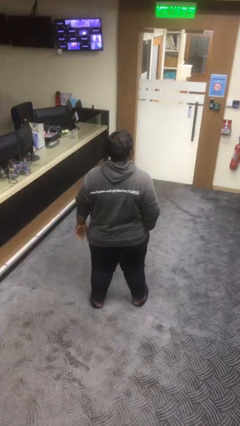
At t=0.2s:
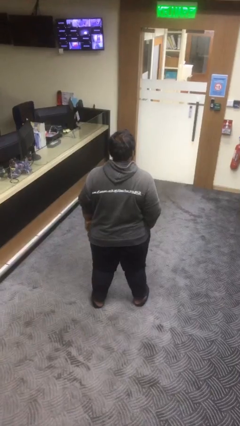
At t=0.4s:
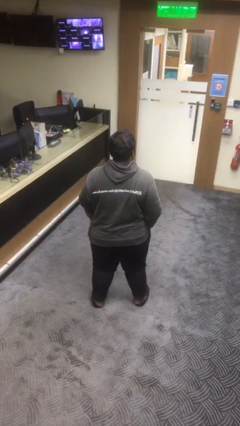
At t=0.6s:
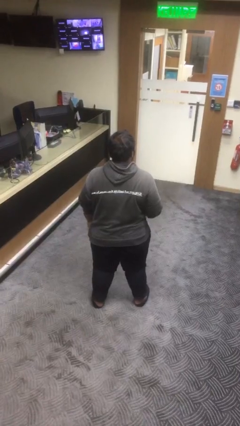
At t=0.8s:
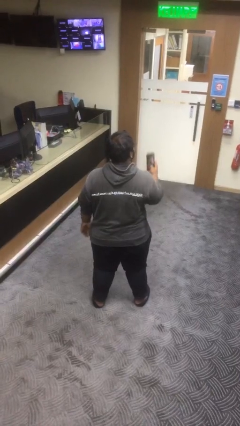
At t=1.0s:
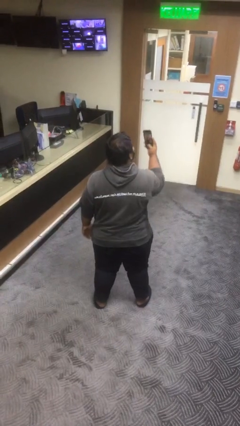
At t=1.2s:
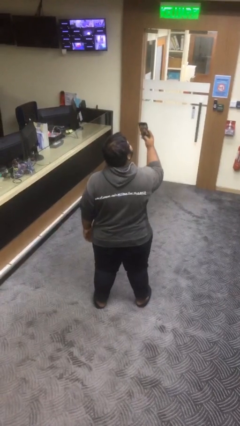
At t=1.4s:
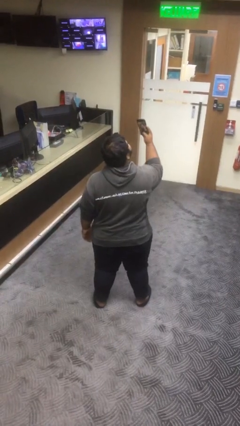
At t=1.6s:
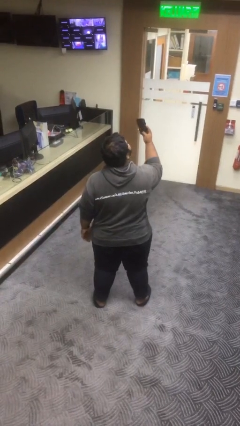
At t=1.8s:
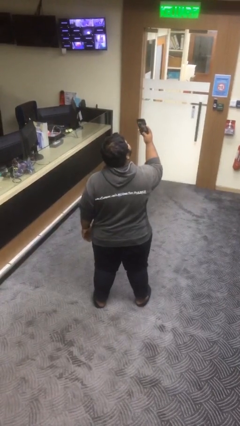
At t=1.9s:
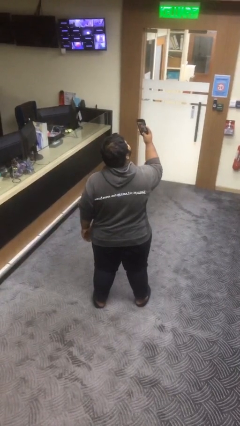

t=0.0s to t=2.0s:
person takes selfie

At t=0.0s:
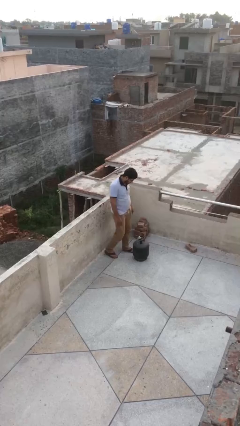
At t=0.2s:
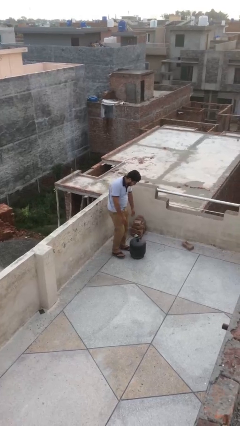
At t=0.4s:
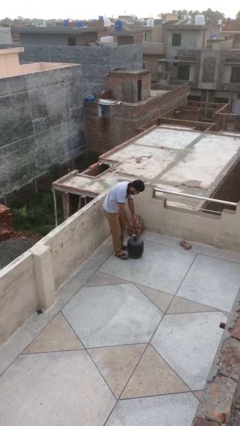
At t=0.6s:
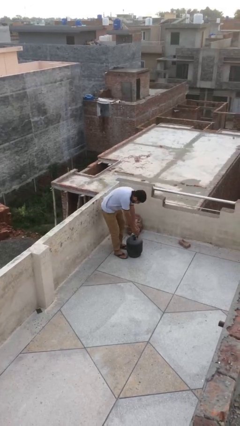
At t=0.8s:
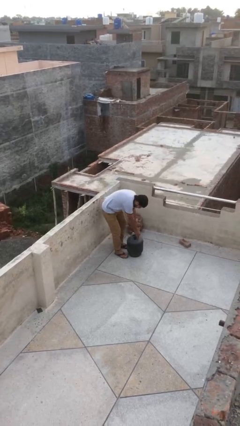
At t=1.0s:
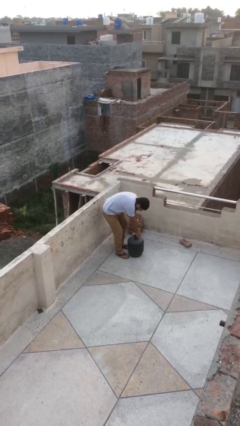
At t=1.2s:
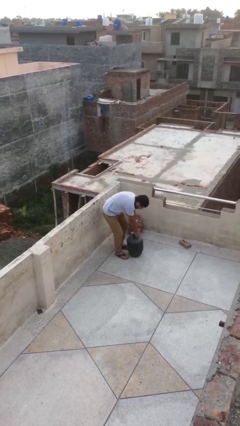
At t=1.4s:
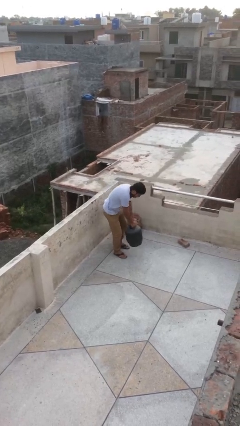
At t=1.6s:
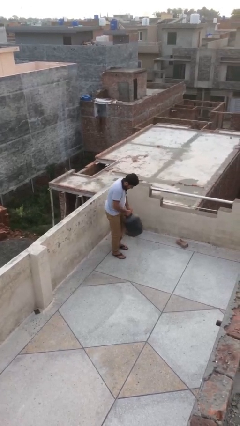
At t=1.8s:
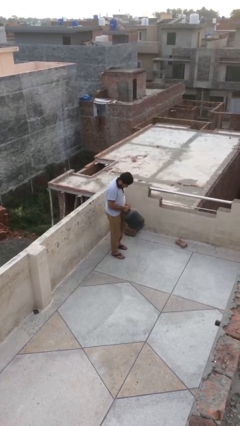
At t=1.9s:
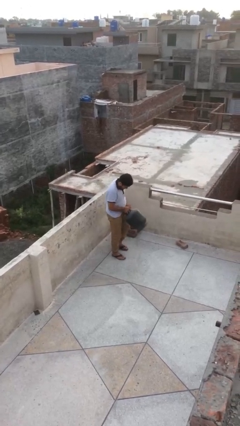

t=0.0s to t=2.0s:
person picks up object from floor

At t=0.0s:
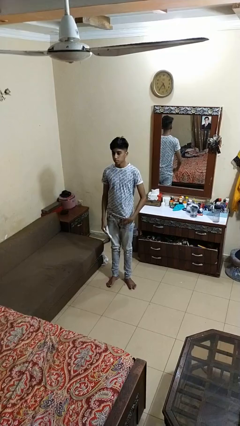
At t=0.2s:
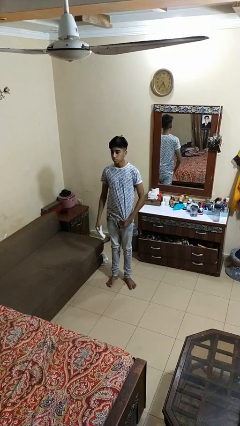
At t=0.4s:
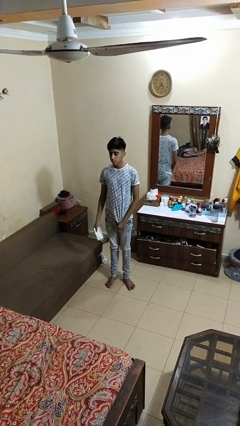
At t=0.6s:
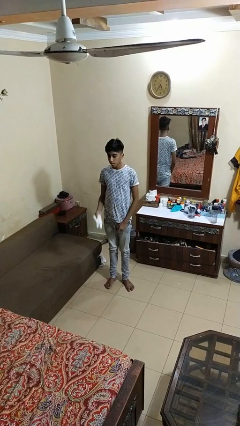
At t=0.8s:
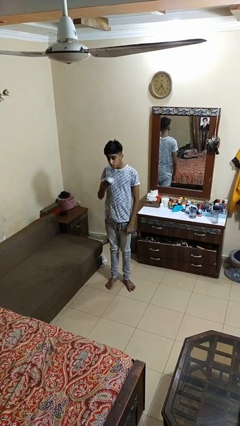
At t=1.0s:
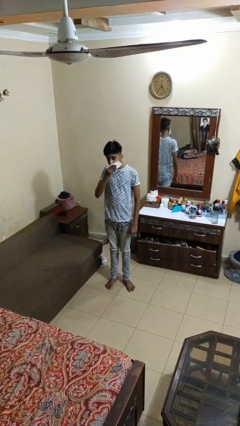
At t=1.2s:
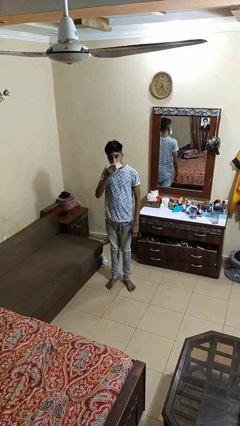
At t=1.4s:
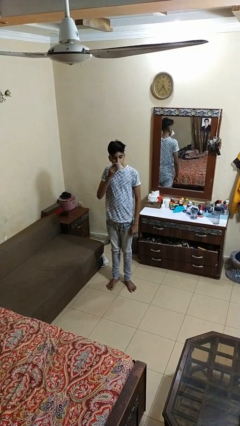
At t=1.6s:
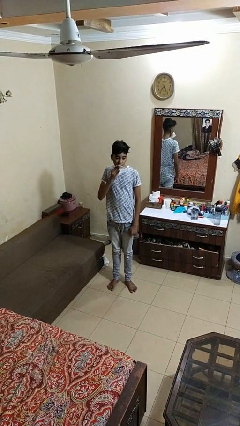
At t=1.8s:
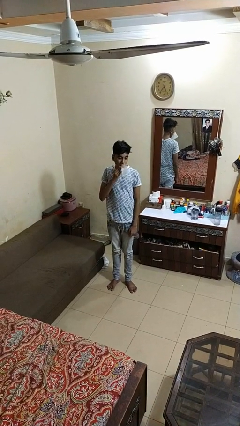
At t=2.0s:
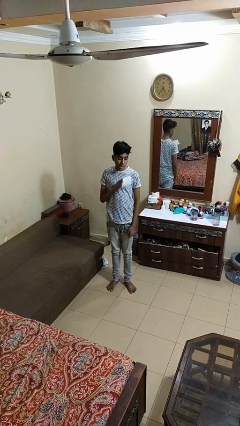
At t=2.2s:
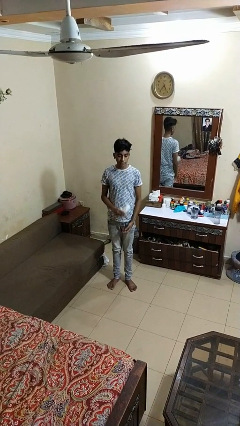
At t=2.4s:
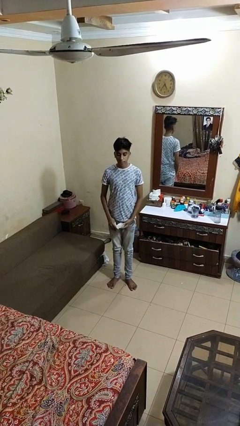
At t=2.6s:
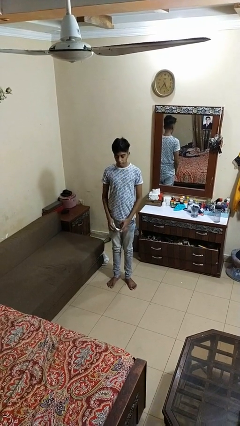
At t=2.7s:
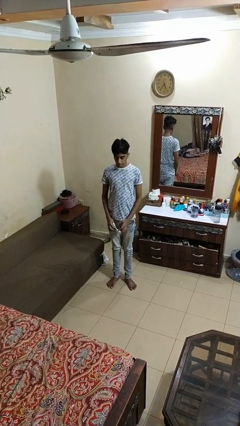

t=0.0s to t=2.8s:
person wipes mouth with napkin

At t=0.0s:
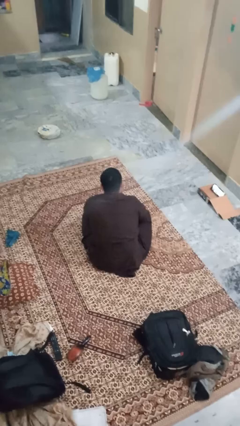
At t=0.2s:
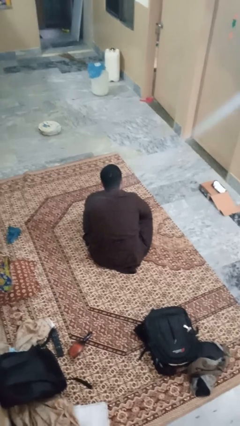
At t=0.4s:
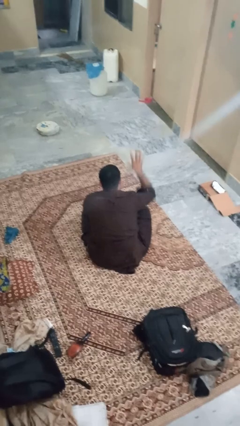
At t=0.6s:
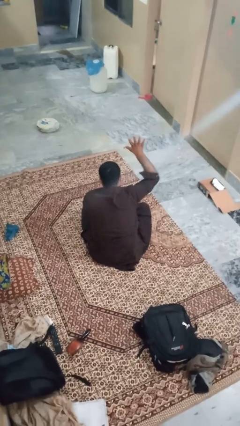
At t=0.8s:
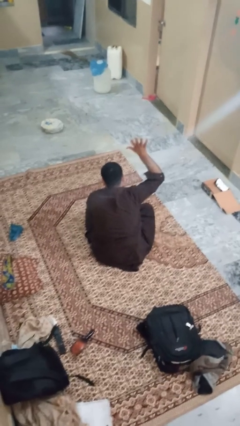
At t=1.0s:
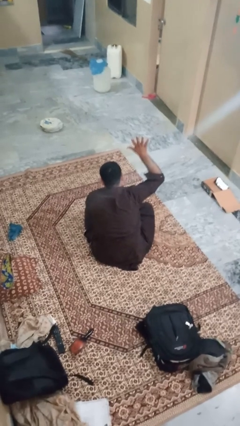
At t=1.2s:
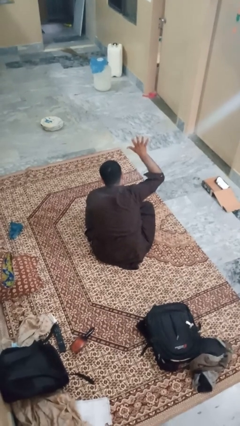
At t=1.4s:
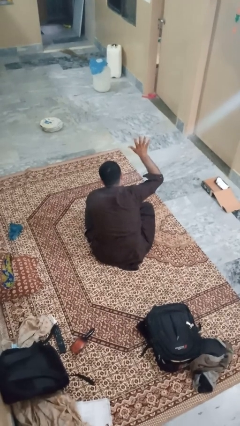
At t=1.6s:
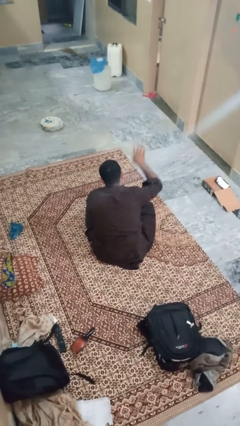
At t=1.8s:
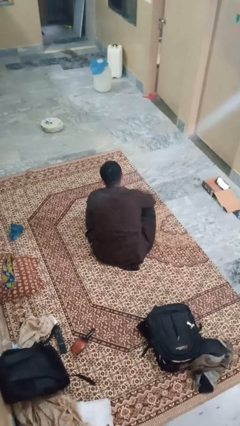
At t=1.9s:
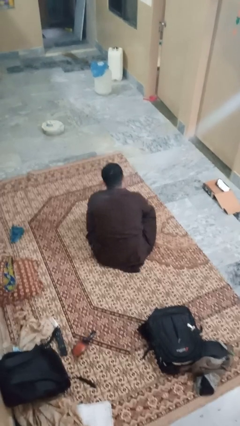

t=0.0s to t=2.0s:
person gestures number five

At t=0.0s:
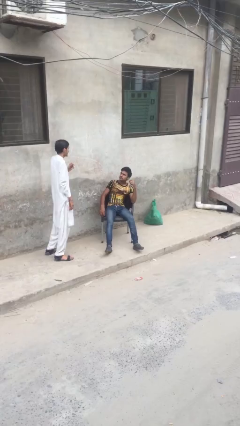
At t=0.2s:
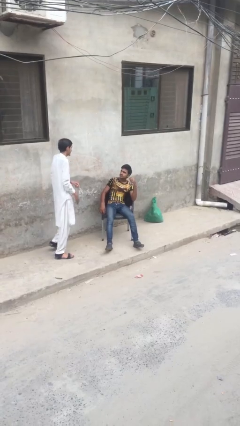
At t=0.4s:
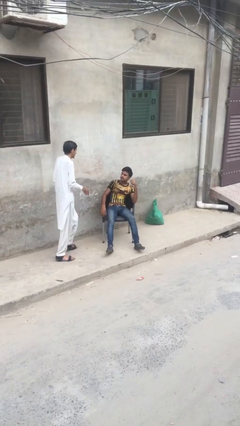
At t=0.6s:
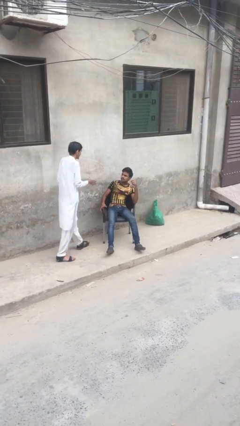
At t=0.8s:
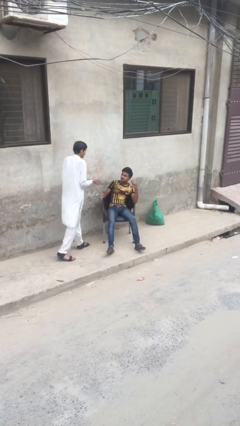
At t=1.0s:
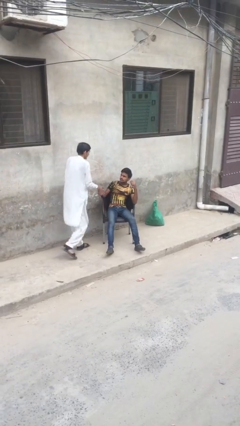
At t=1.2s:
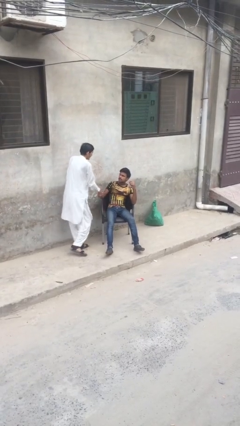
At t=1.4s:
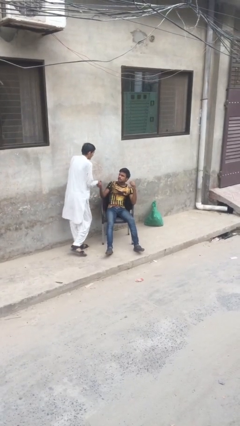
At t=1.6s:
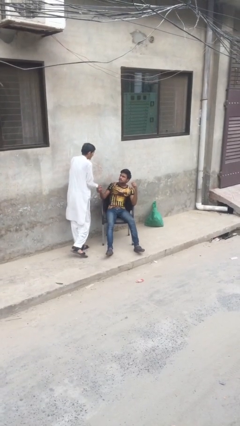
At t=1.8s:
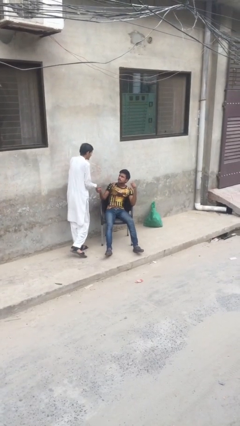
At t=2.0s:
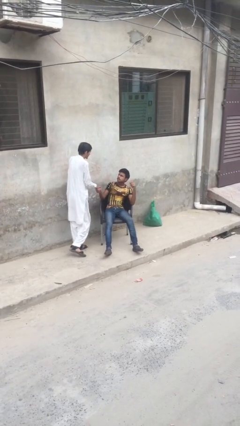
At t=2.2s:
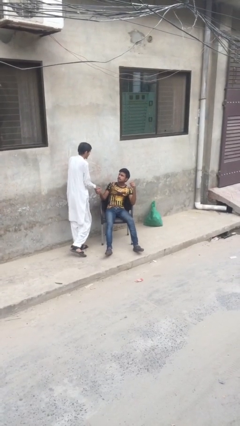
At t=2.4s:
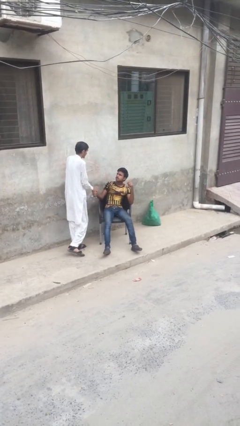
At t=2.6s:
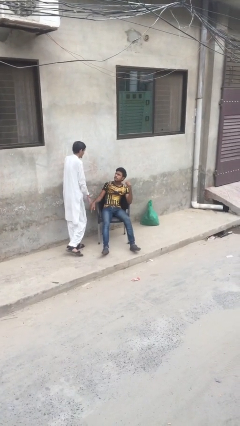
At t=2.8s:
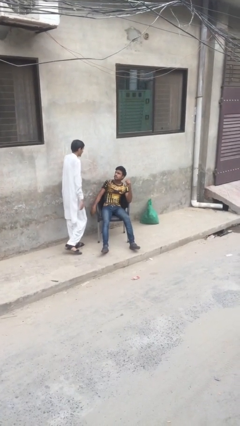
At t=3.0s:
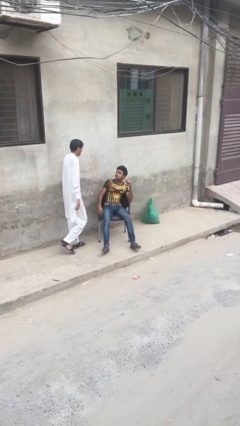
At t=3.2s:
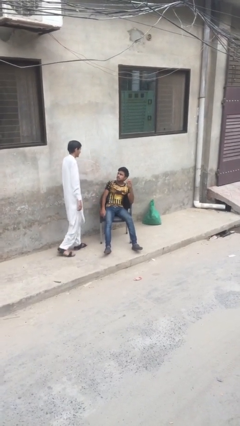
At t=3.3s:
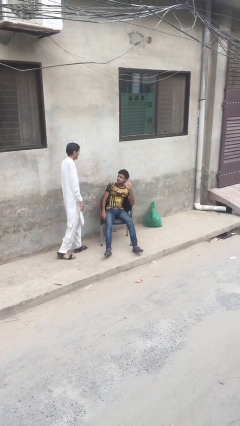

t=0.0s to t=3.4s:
person shakes hand

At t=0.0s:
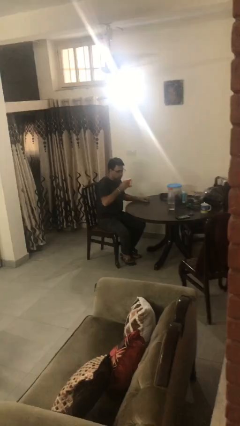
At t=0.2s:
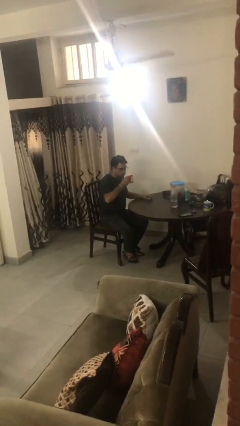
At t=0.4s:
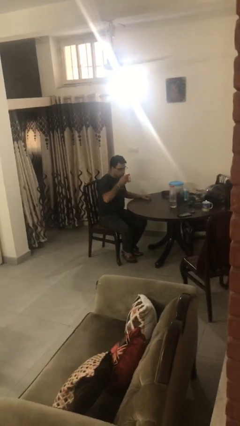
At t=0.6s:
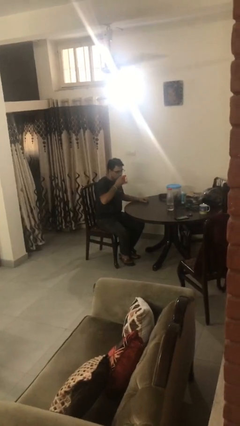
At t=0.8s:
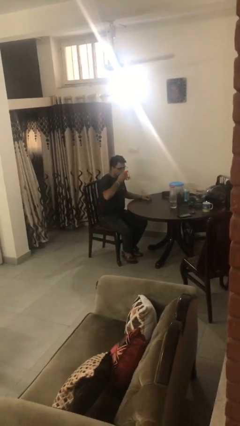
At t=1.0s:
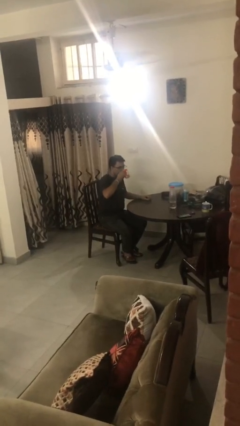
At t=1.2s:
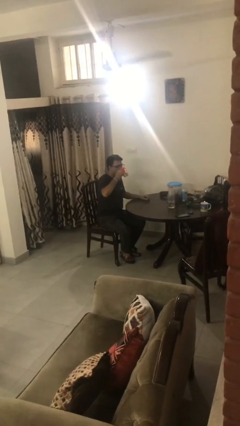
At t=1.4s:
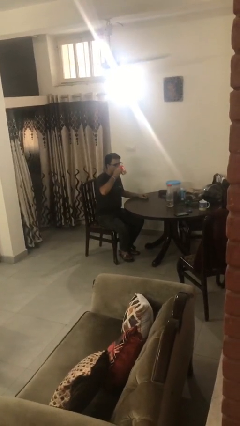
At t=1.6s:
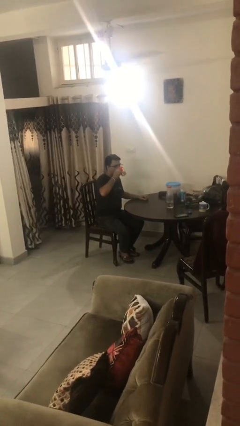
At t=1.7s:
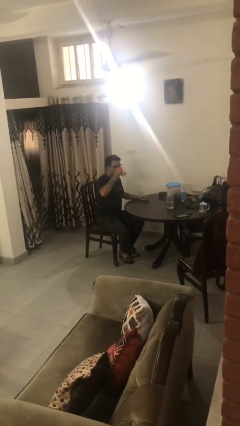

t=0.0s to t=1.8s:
person drinks from mug

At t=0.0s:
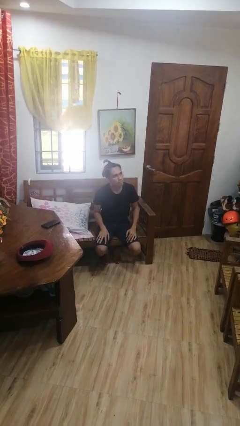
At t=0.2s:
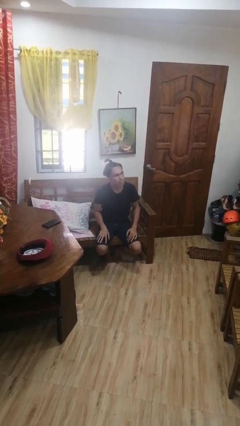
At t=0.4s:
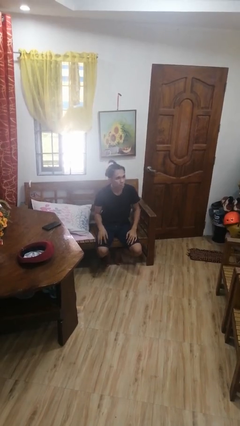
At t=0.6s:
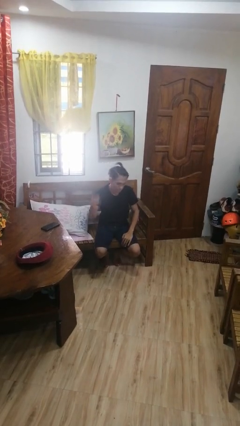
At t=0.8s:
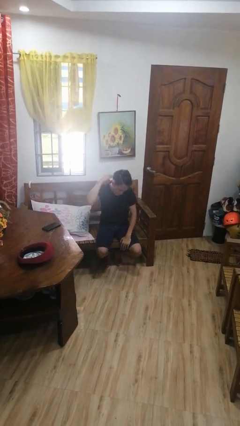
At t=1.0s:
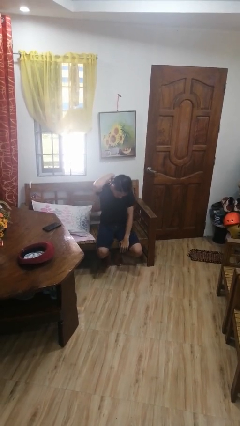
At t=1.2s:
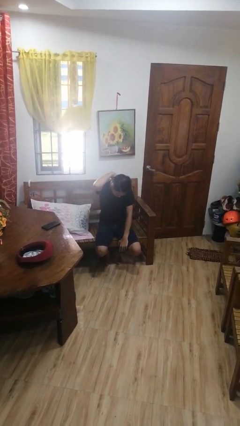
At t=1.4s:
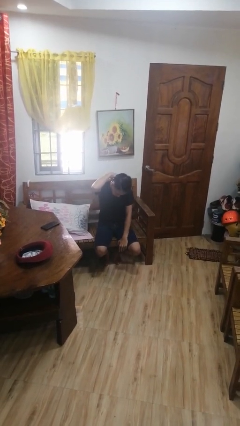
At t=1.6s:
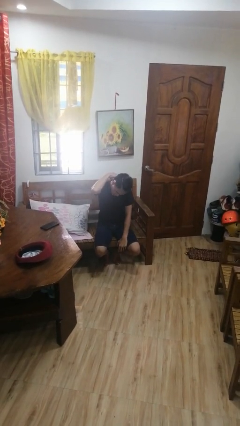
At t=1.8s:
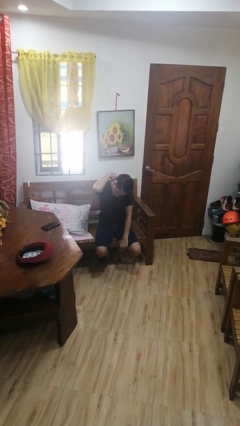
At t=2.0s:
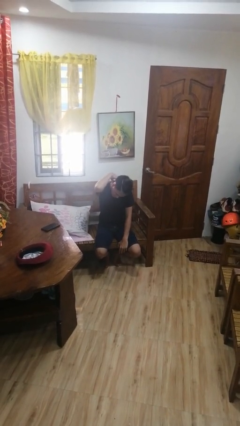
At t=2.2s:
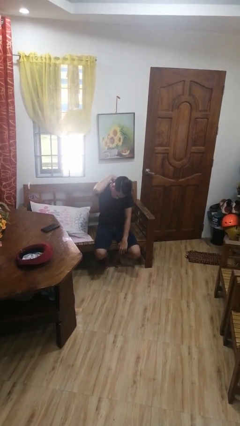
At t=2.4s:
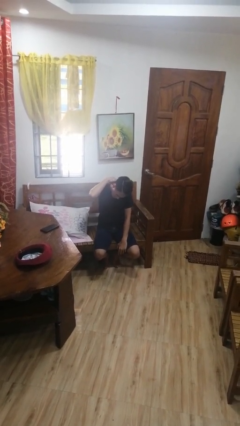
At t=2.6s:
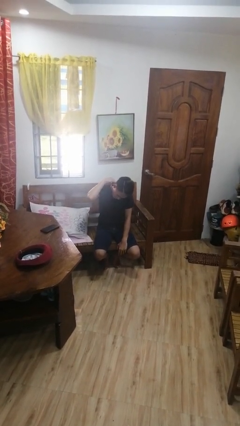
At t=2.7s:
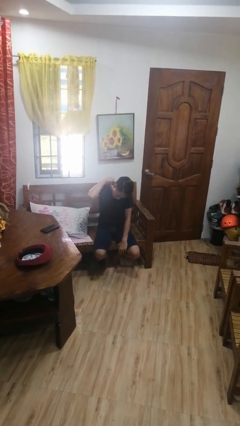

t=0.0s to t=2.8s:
person rubs neck

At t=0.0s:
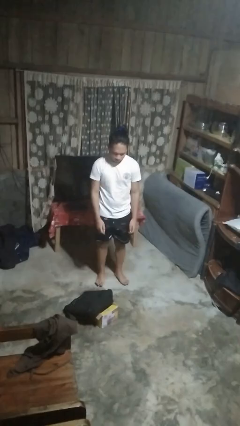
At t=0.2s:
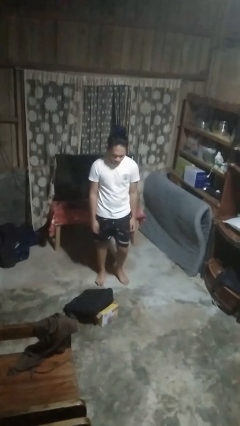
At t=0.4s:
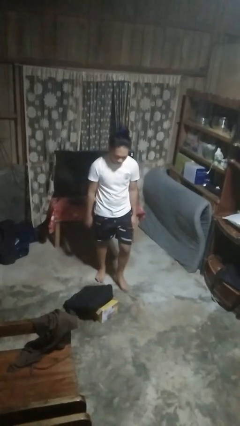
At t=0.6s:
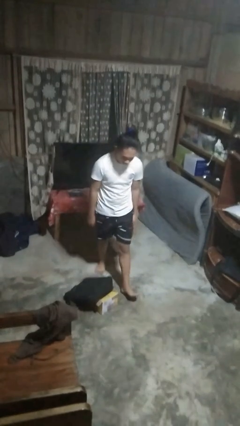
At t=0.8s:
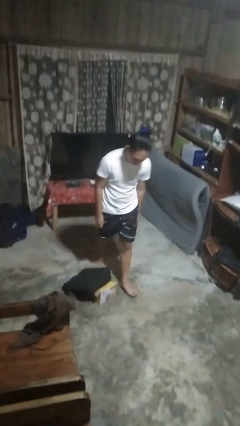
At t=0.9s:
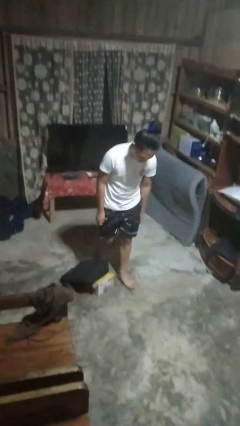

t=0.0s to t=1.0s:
person trips on object on floor
